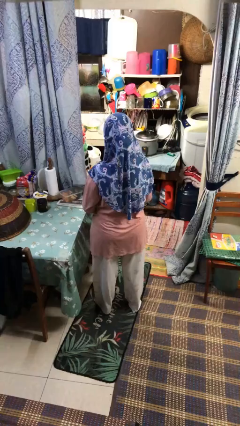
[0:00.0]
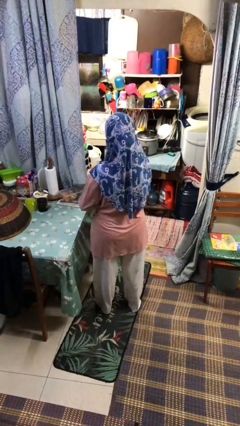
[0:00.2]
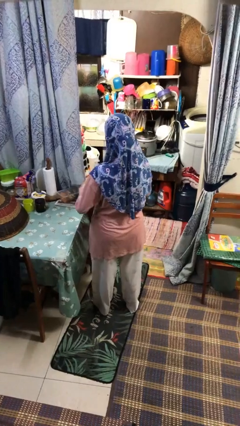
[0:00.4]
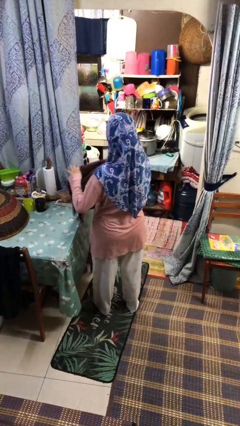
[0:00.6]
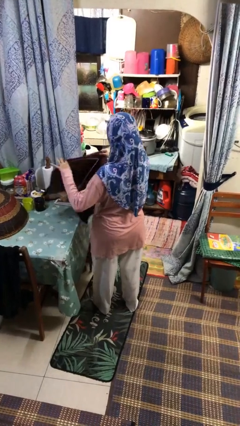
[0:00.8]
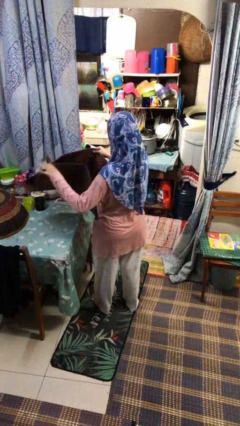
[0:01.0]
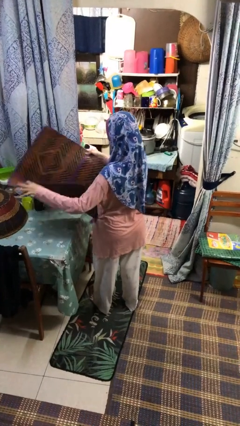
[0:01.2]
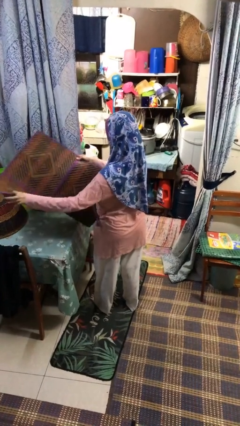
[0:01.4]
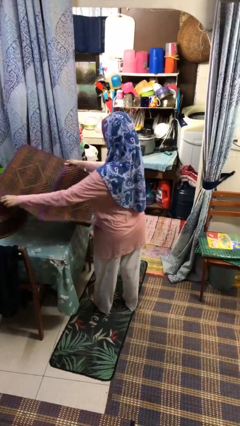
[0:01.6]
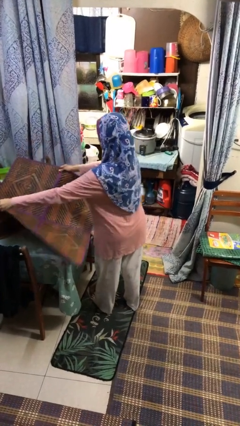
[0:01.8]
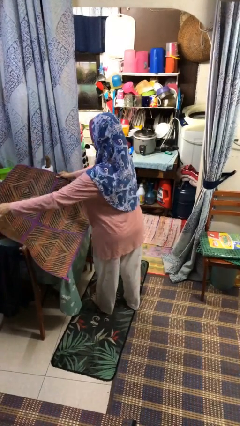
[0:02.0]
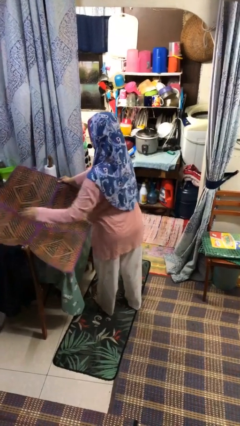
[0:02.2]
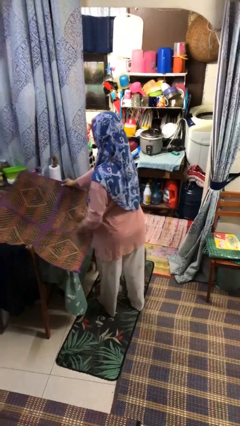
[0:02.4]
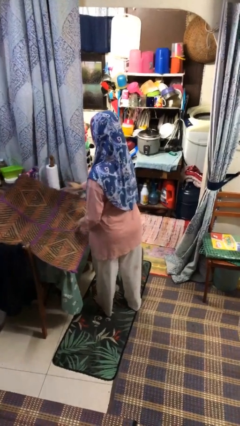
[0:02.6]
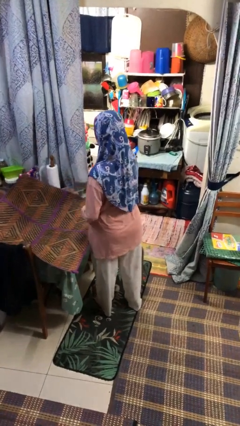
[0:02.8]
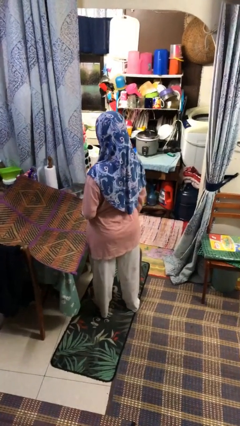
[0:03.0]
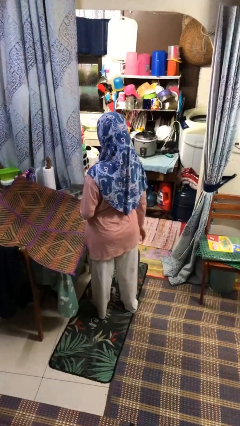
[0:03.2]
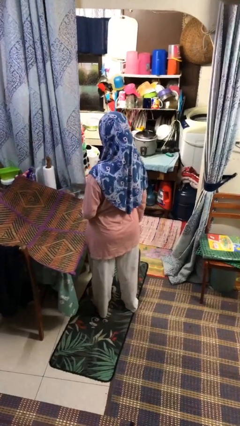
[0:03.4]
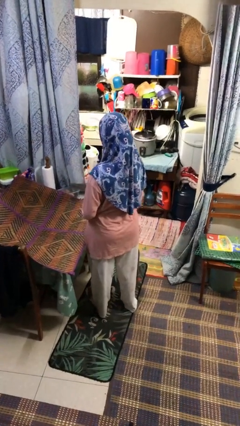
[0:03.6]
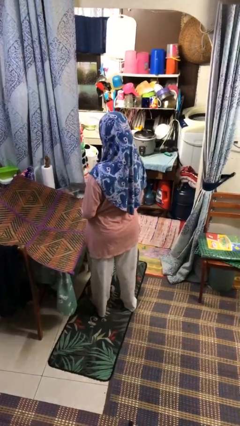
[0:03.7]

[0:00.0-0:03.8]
person spreads tablecloth

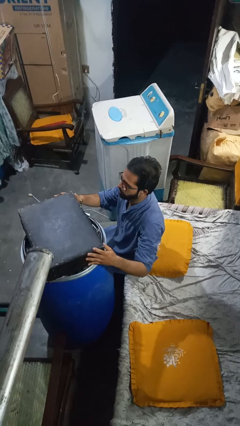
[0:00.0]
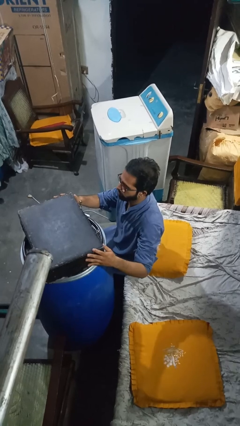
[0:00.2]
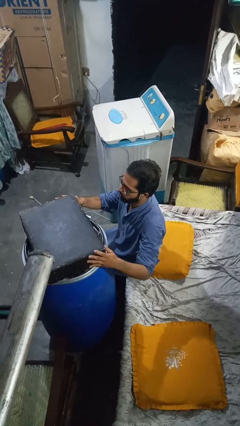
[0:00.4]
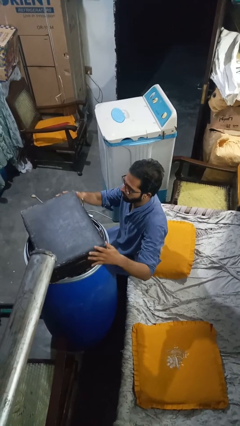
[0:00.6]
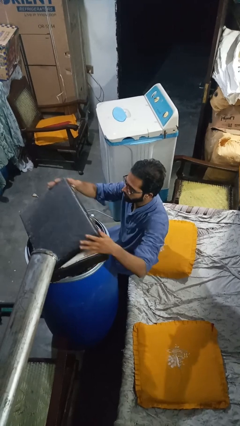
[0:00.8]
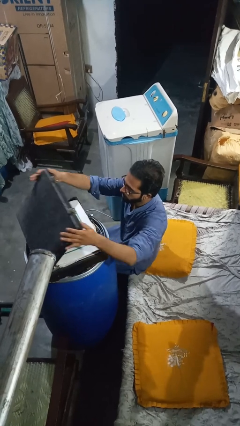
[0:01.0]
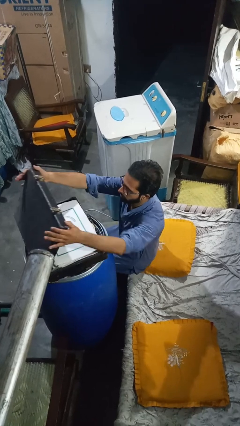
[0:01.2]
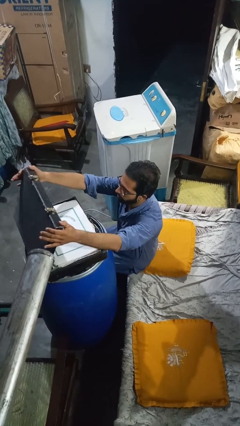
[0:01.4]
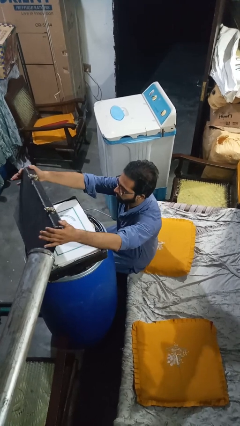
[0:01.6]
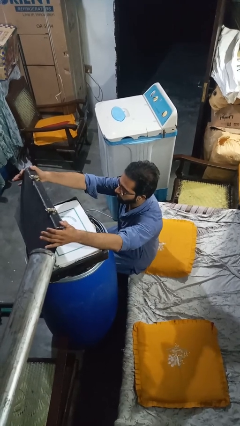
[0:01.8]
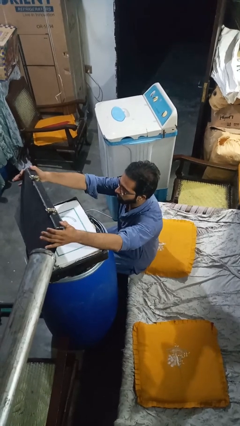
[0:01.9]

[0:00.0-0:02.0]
person opens suitcase

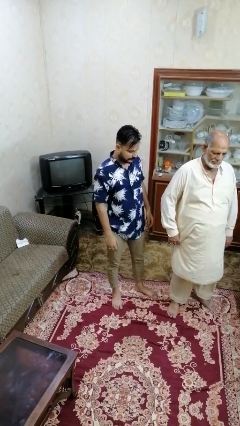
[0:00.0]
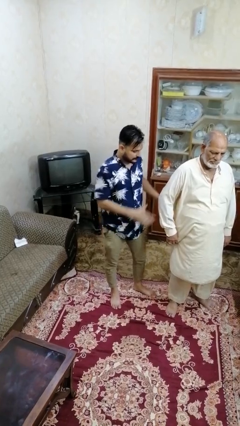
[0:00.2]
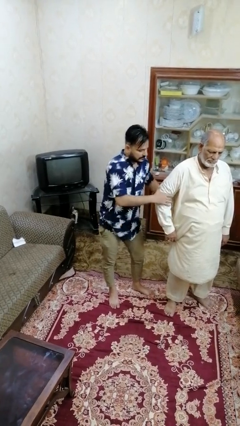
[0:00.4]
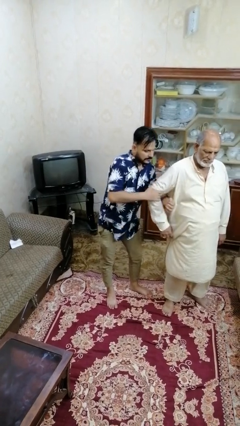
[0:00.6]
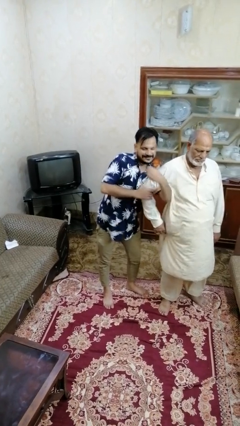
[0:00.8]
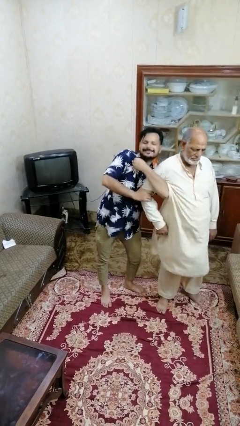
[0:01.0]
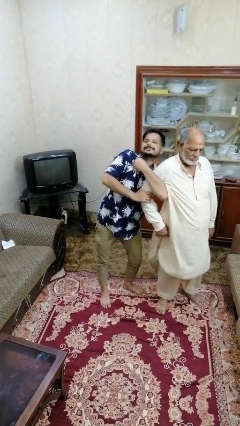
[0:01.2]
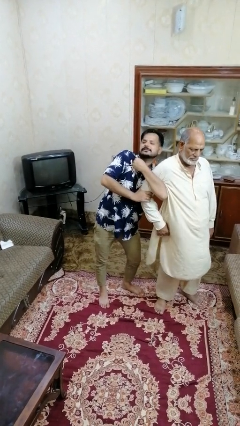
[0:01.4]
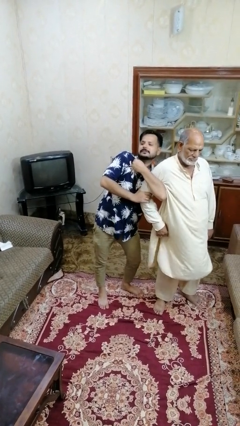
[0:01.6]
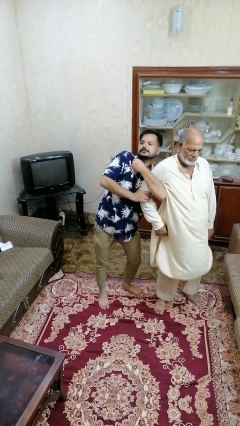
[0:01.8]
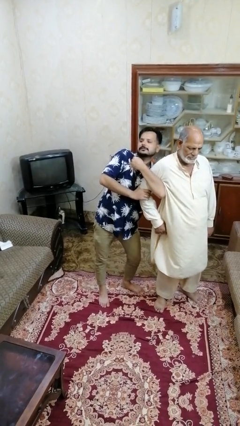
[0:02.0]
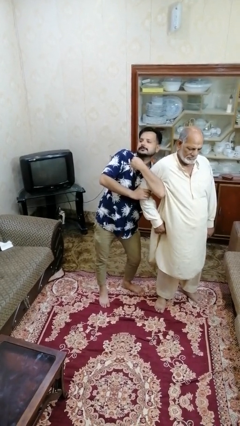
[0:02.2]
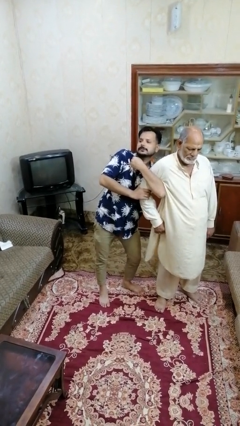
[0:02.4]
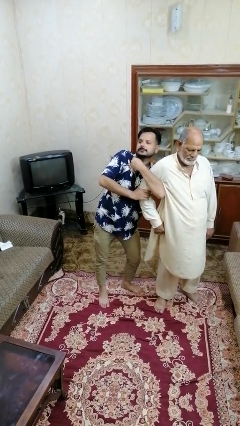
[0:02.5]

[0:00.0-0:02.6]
person grabs person by bicep

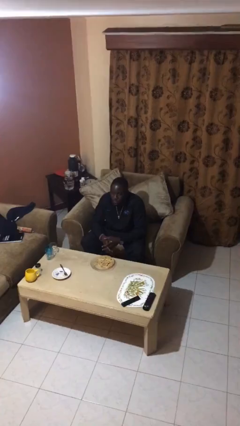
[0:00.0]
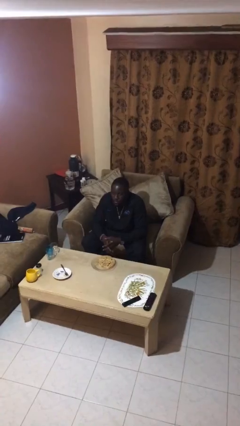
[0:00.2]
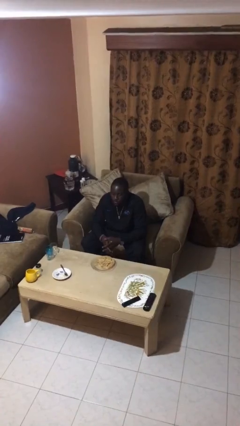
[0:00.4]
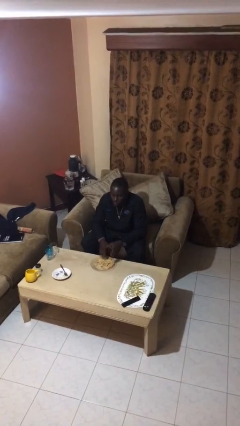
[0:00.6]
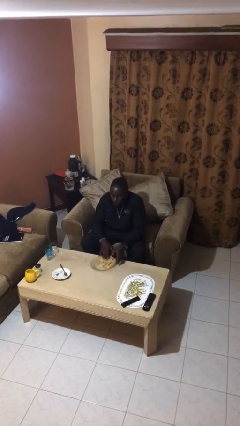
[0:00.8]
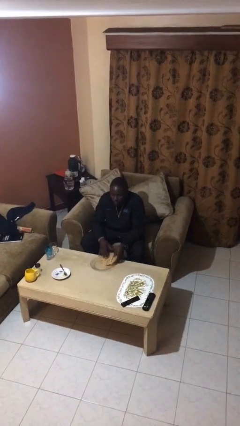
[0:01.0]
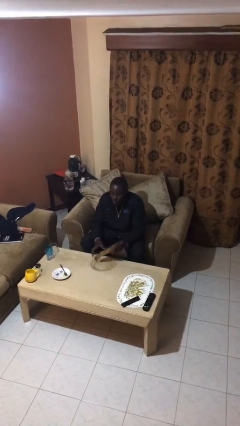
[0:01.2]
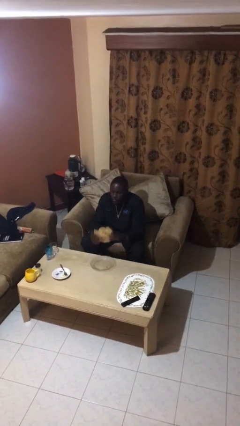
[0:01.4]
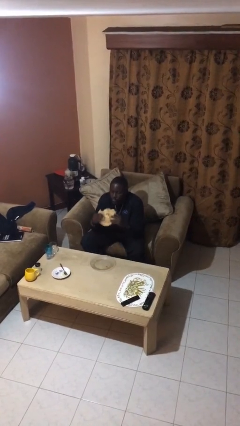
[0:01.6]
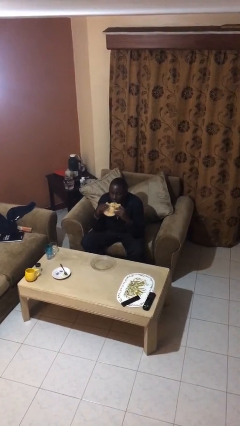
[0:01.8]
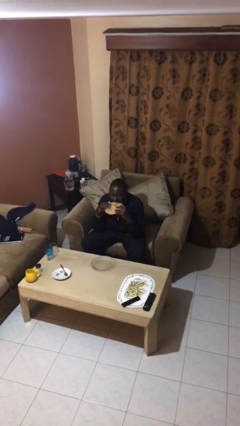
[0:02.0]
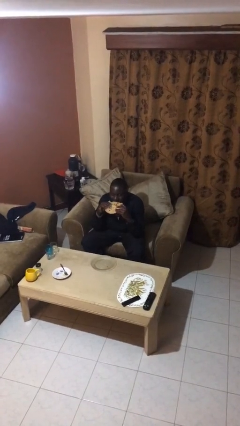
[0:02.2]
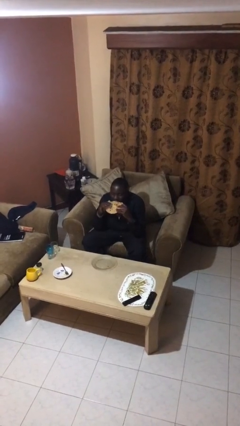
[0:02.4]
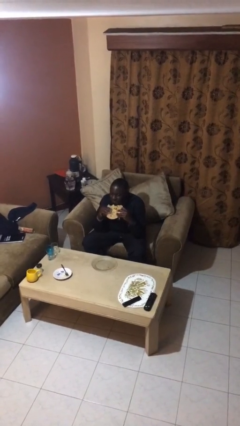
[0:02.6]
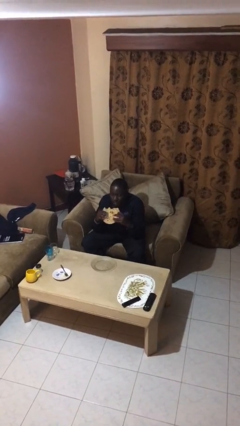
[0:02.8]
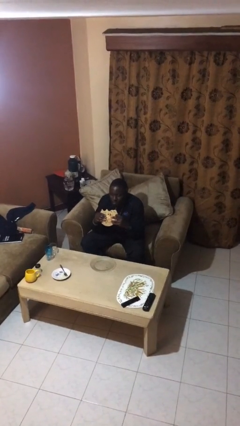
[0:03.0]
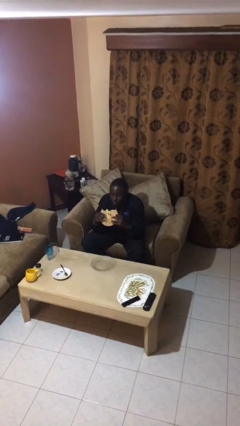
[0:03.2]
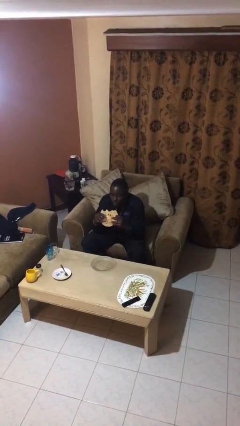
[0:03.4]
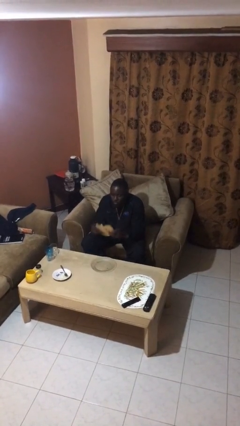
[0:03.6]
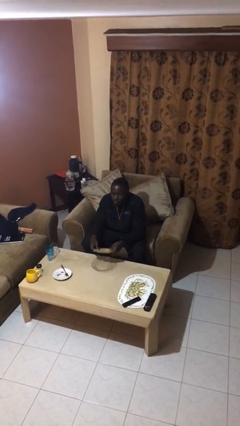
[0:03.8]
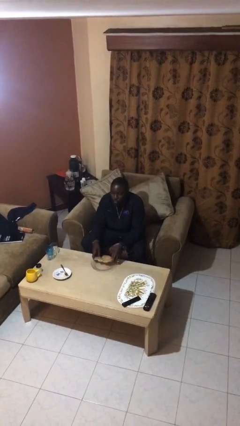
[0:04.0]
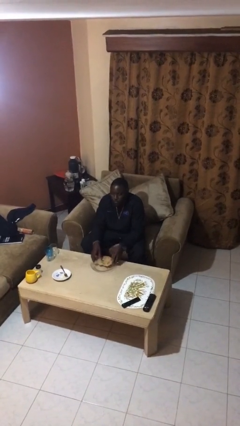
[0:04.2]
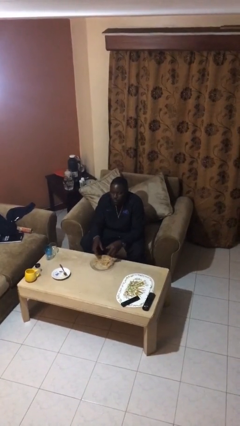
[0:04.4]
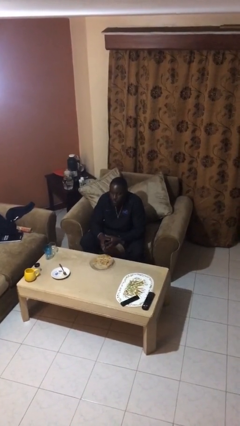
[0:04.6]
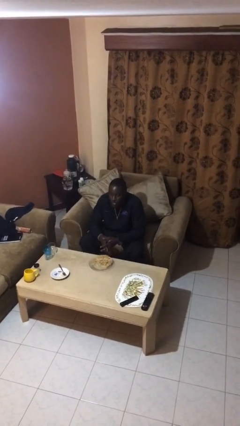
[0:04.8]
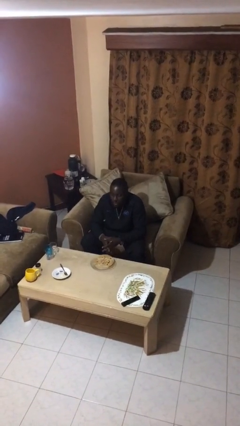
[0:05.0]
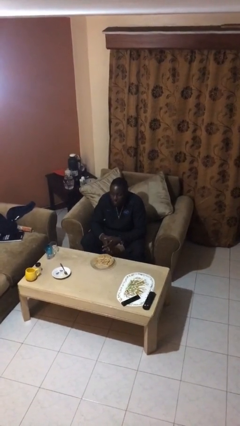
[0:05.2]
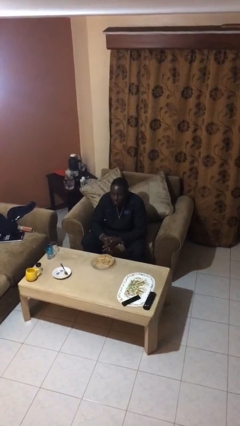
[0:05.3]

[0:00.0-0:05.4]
person eats with hands

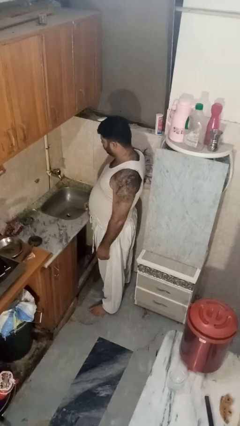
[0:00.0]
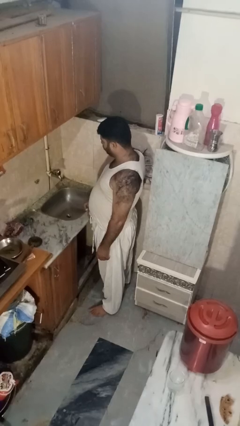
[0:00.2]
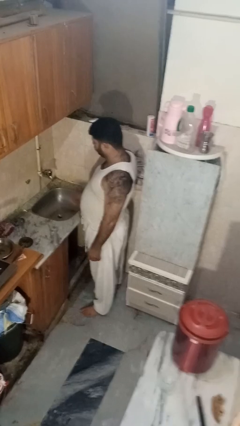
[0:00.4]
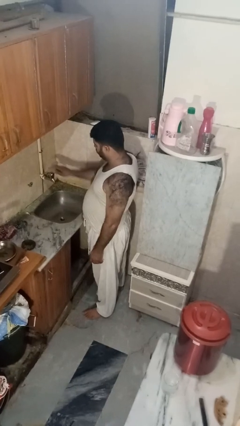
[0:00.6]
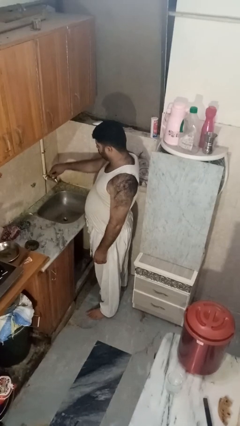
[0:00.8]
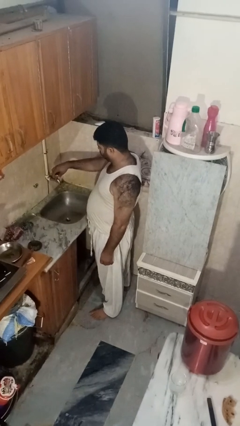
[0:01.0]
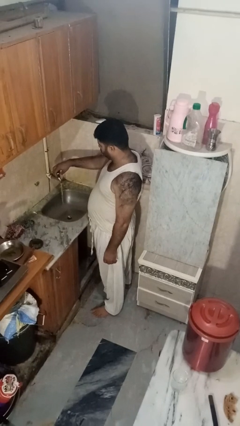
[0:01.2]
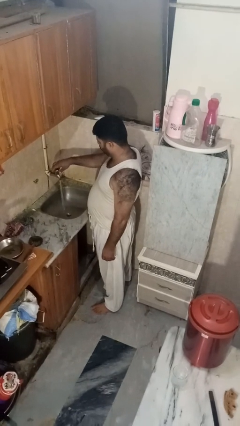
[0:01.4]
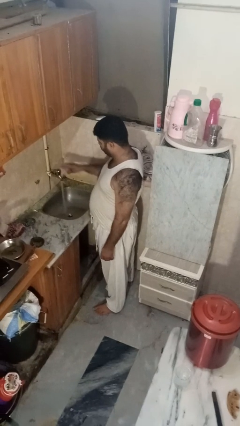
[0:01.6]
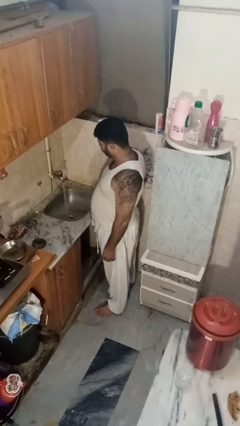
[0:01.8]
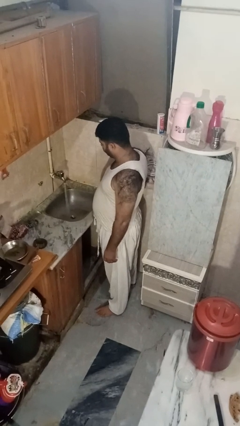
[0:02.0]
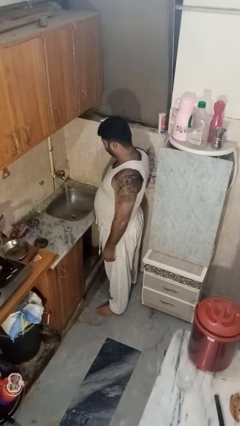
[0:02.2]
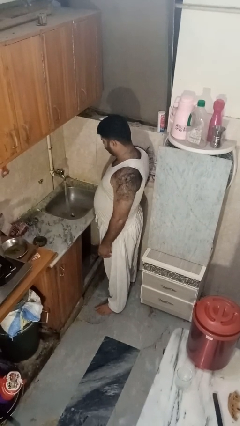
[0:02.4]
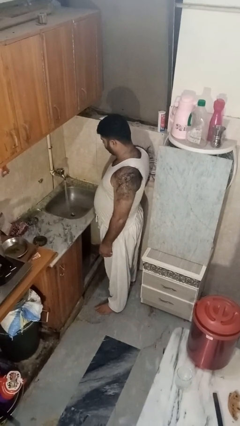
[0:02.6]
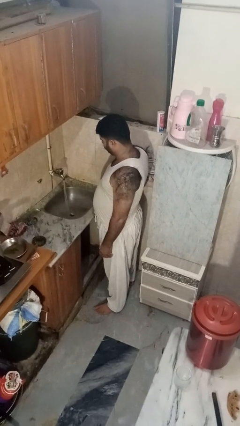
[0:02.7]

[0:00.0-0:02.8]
person turns on faucet

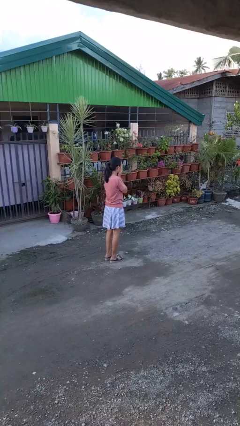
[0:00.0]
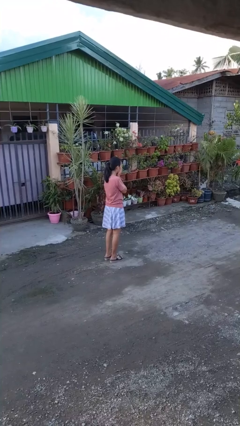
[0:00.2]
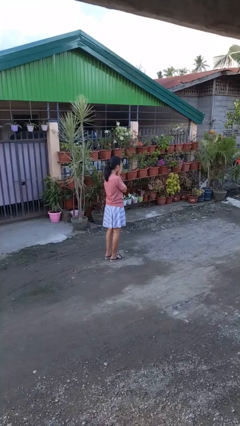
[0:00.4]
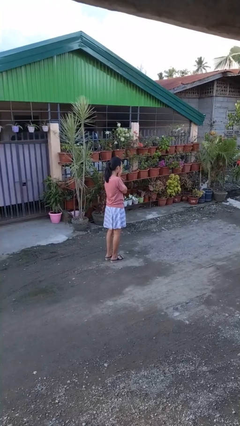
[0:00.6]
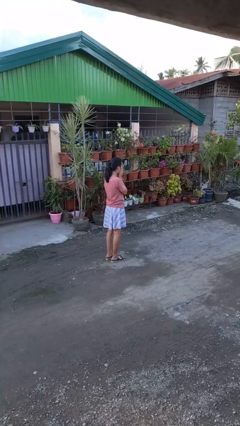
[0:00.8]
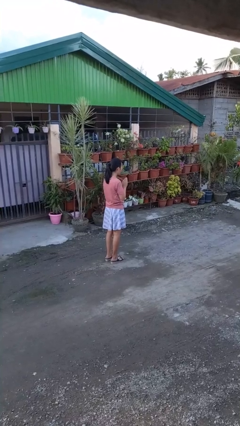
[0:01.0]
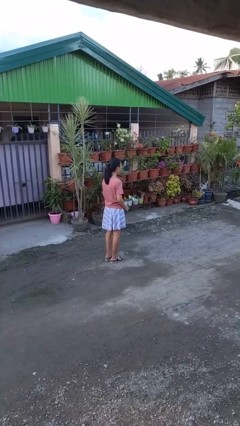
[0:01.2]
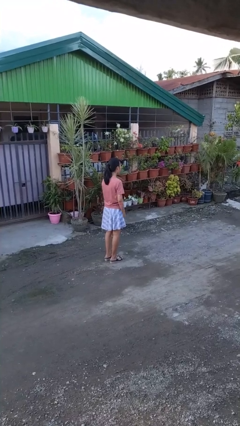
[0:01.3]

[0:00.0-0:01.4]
person blows into hands
